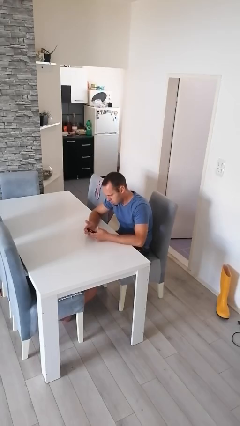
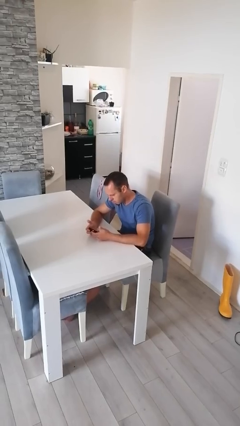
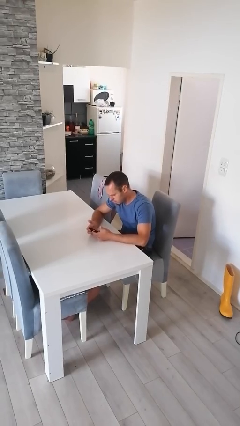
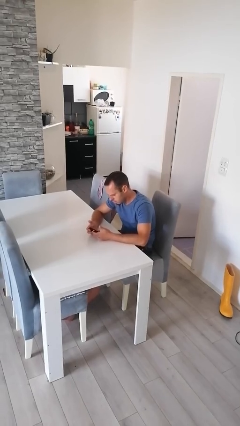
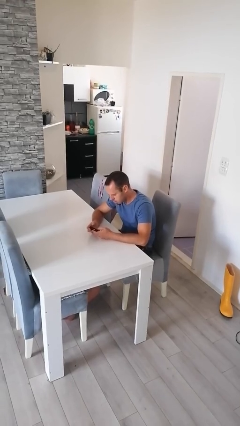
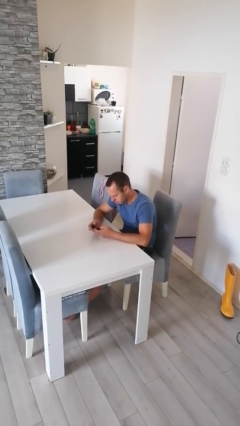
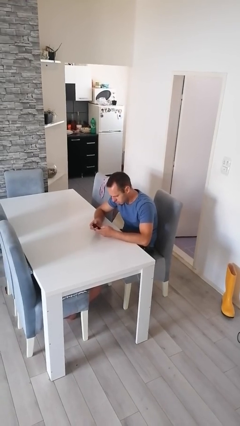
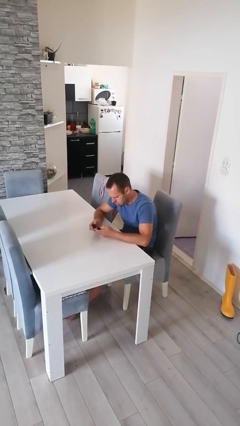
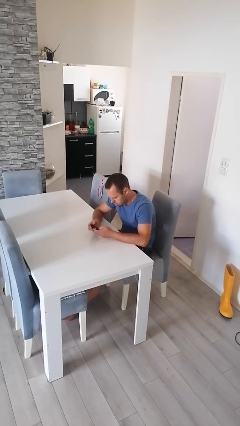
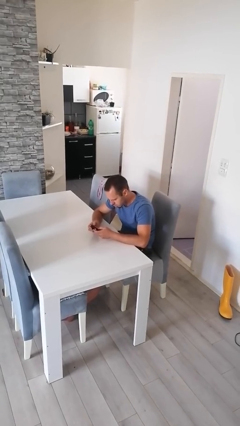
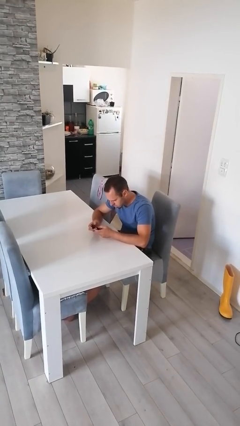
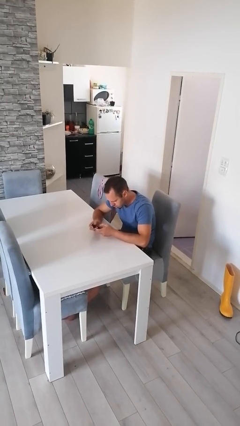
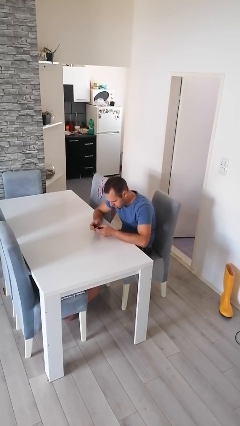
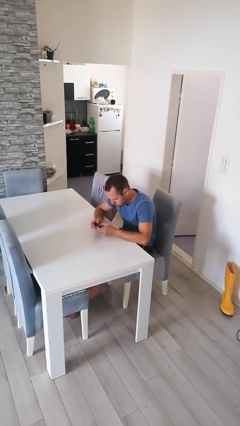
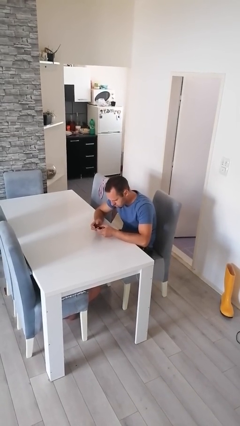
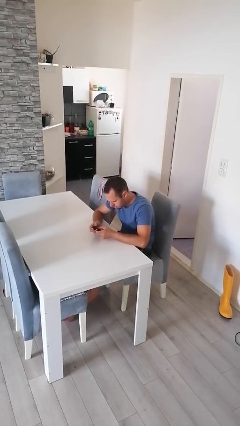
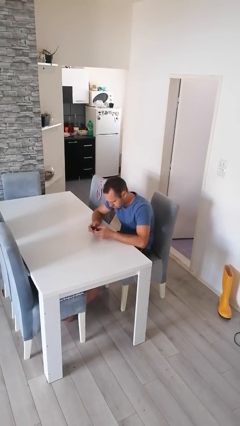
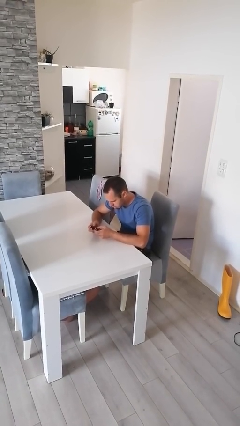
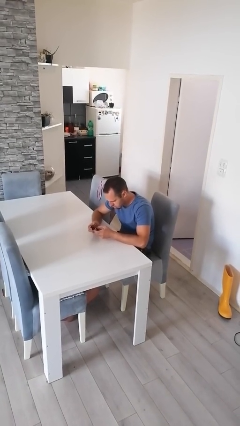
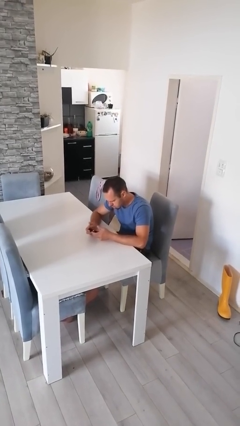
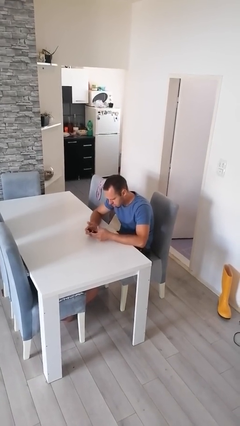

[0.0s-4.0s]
person interacts with handheld game

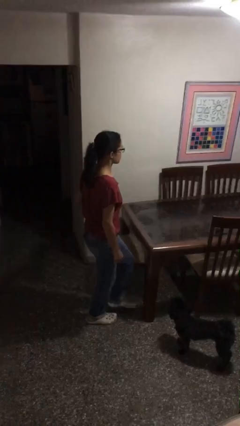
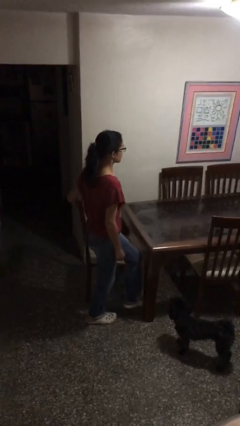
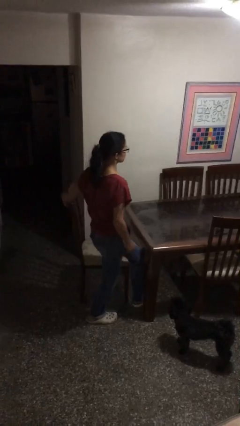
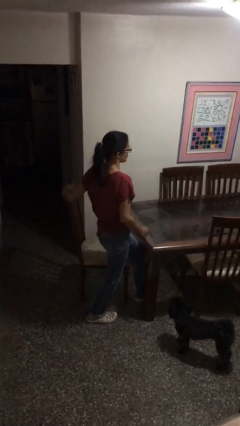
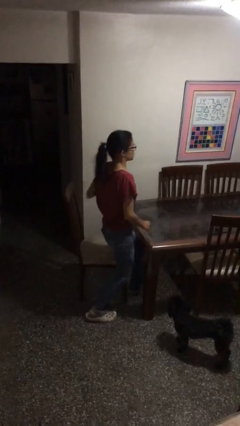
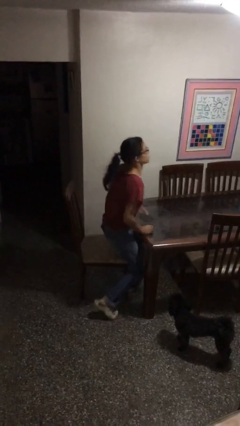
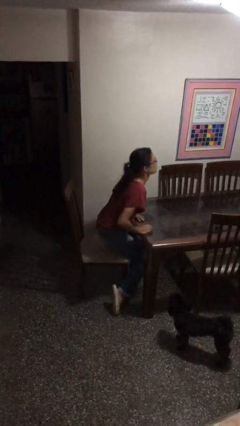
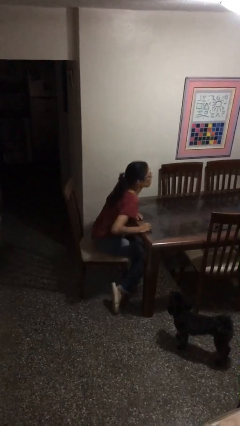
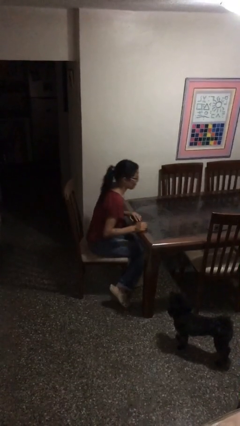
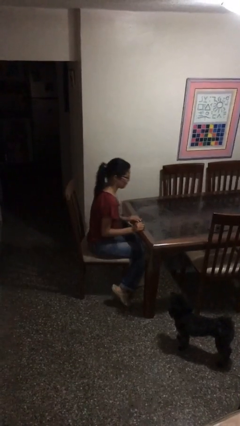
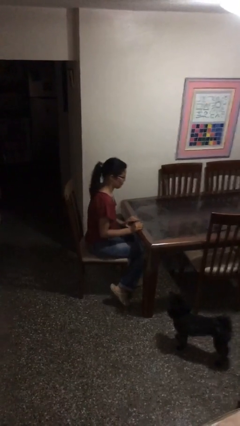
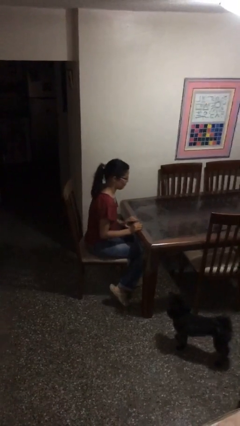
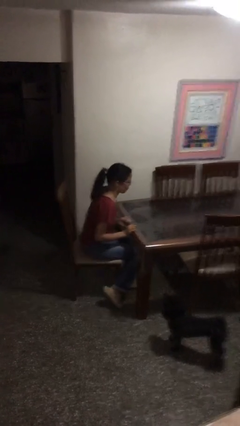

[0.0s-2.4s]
person sits down

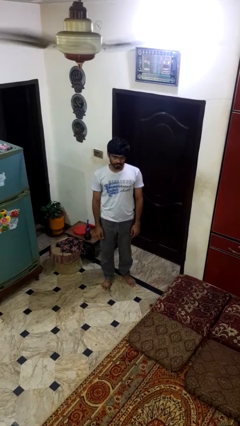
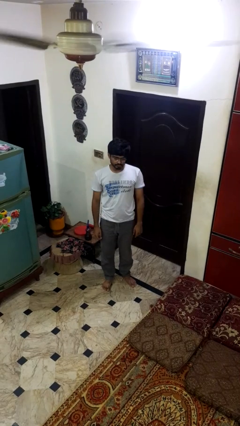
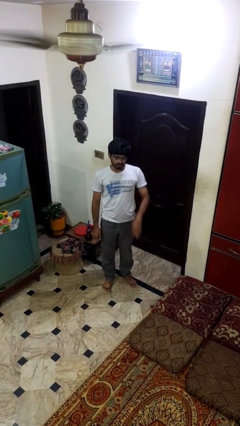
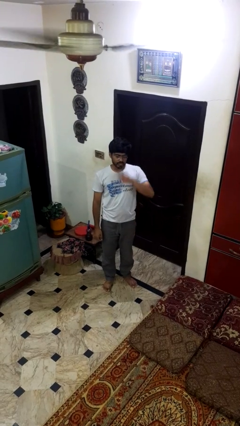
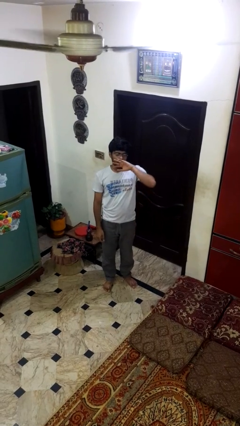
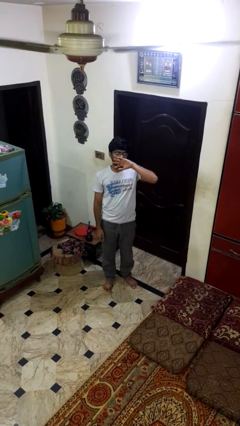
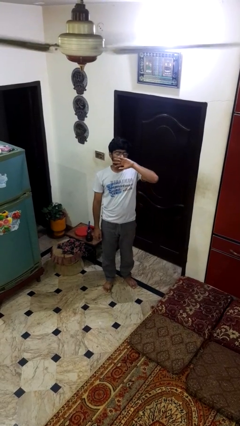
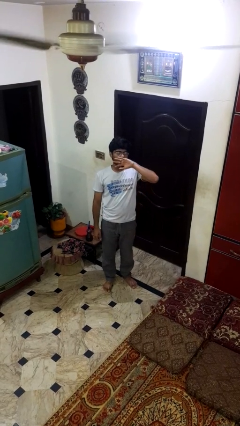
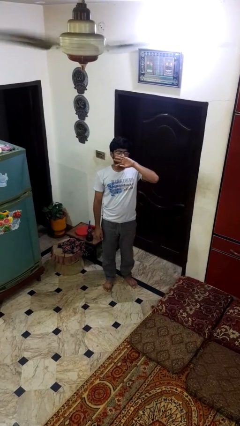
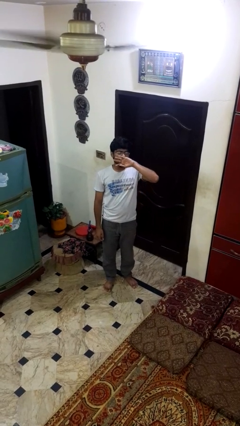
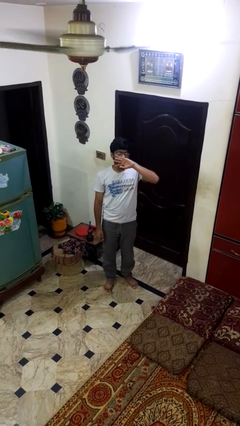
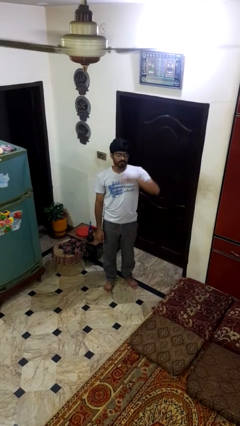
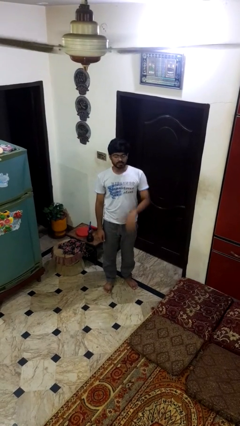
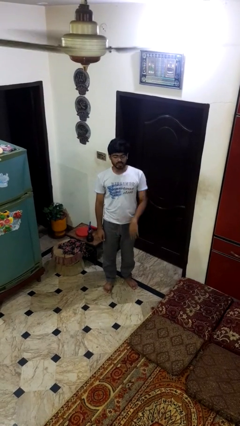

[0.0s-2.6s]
person yawns

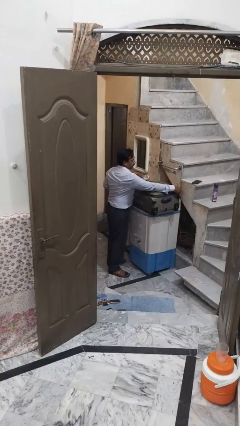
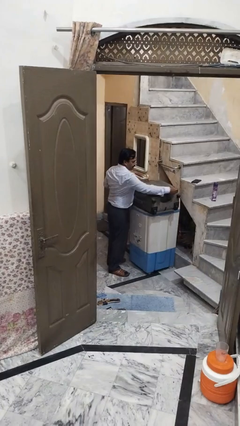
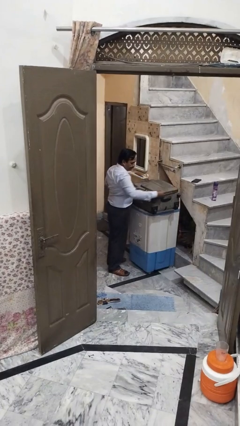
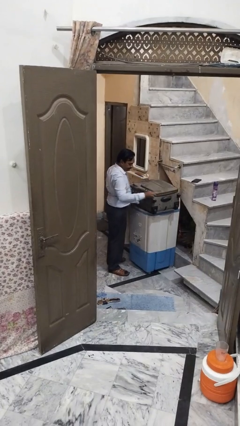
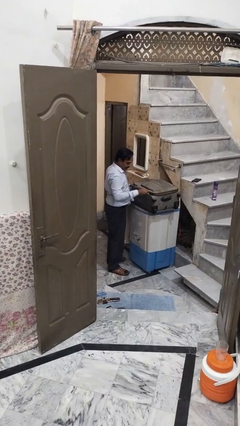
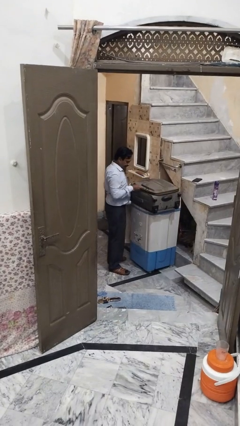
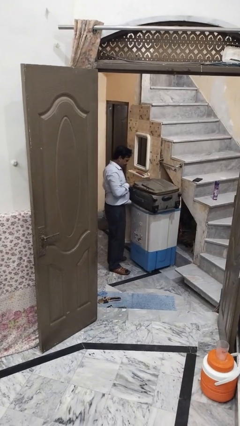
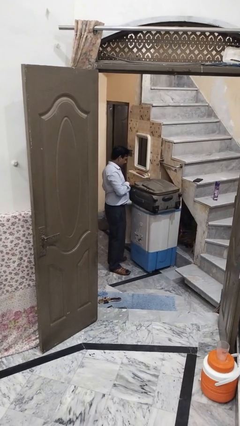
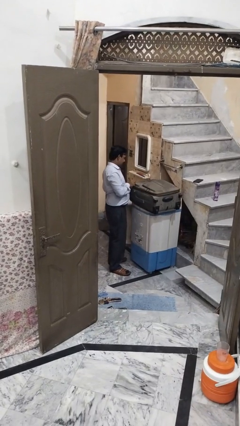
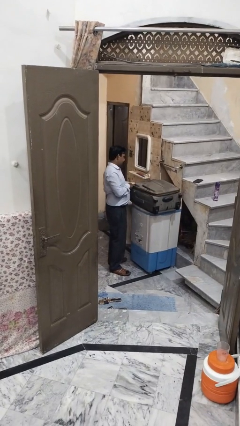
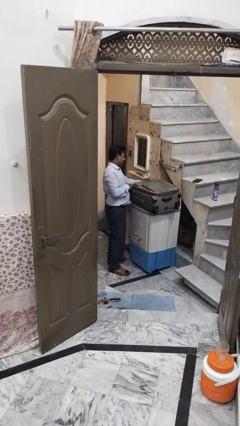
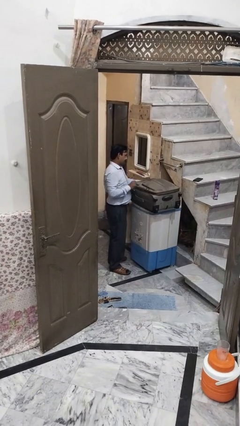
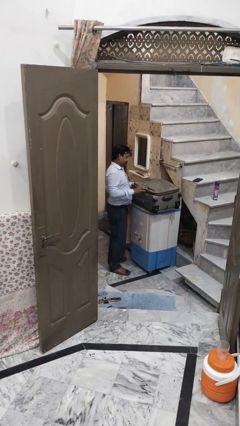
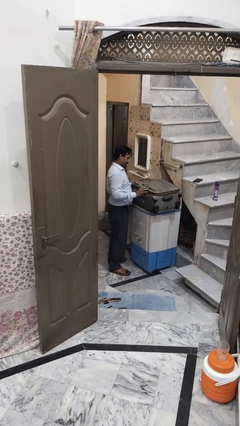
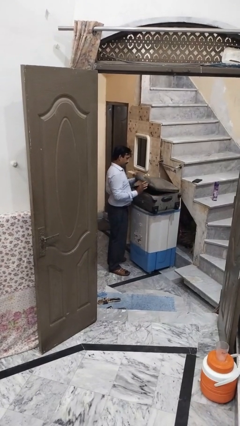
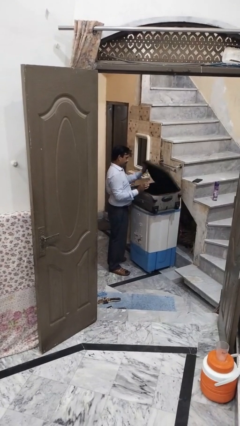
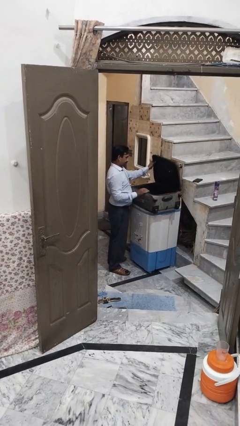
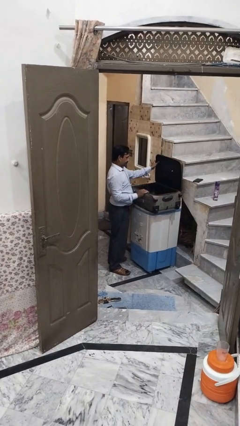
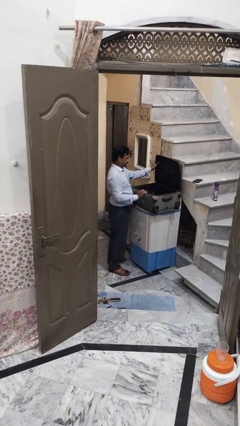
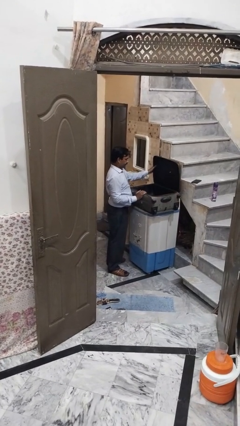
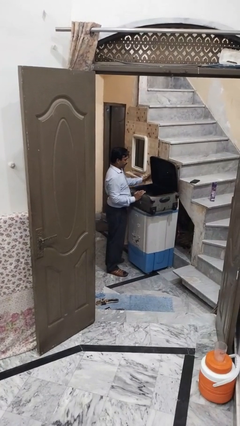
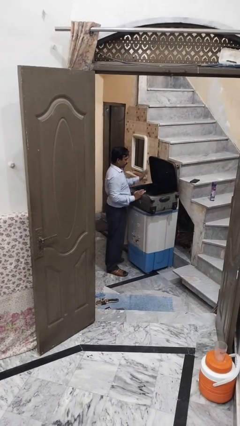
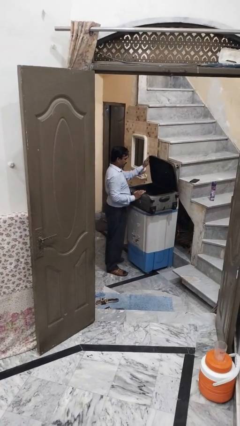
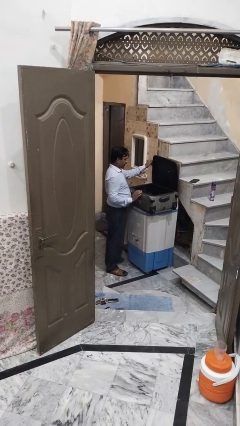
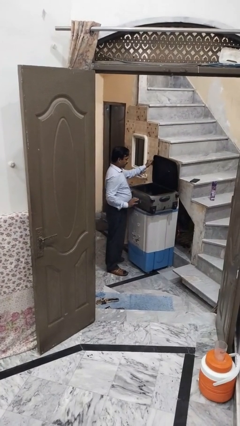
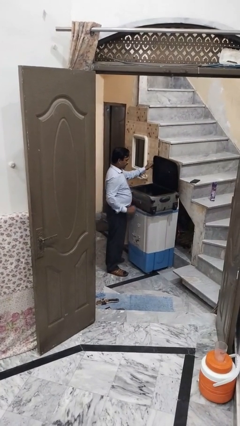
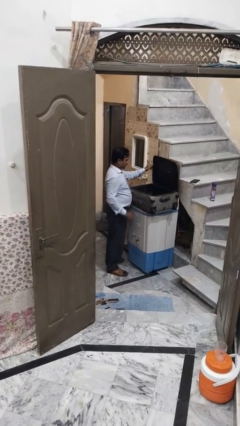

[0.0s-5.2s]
person opens suitcase

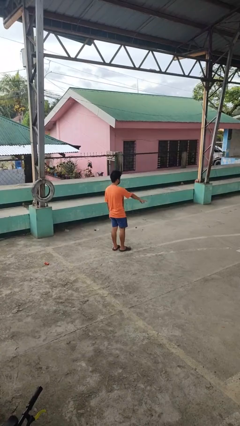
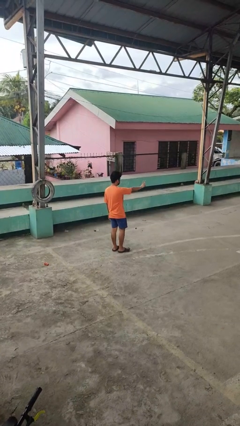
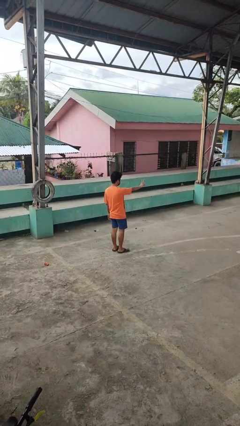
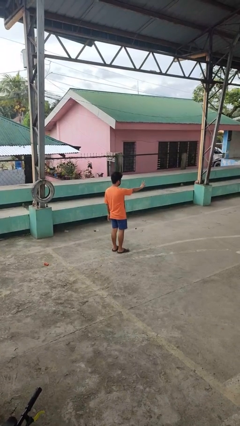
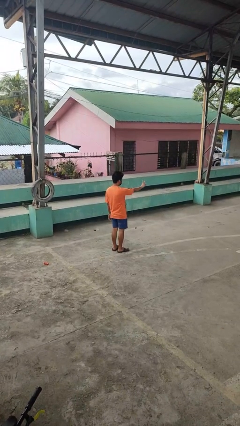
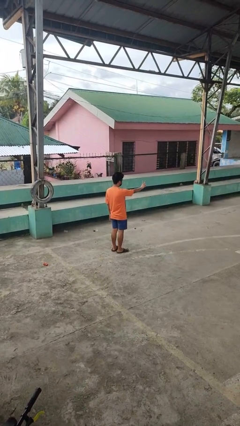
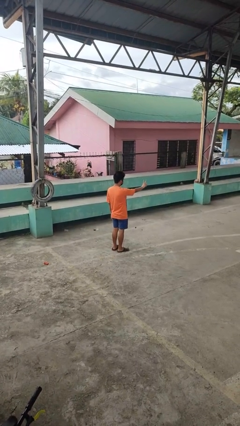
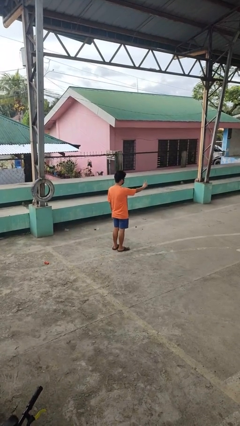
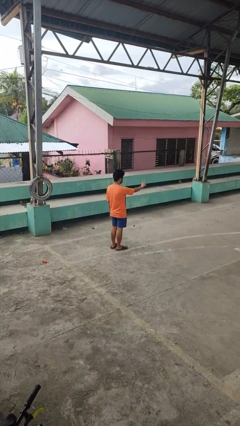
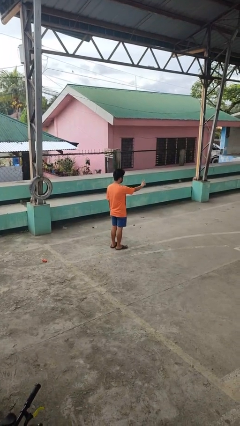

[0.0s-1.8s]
person gestures peace

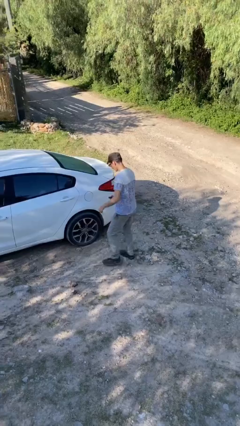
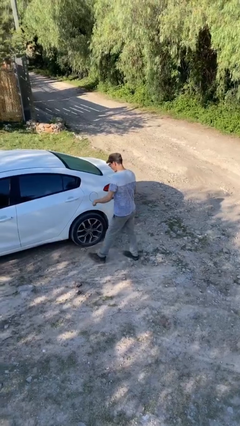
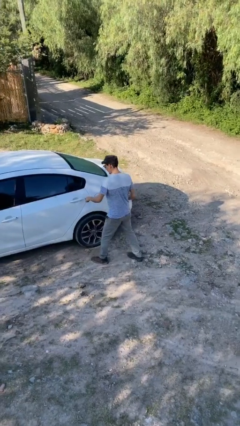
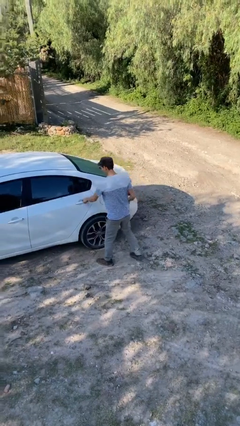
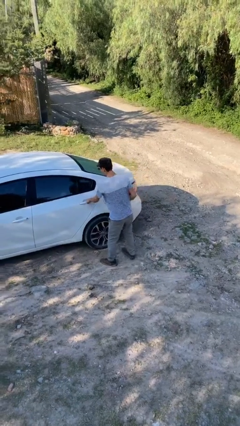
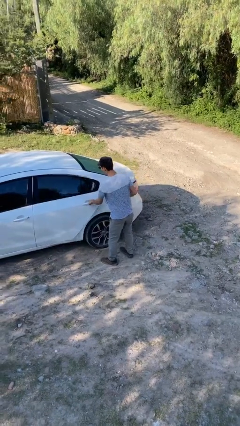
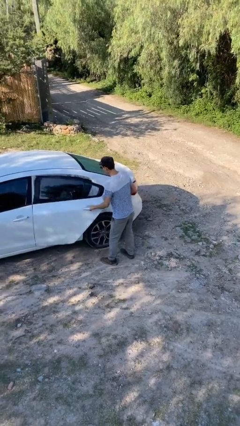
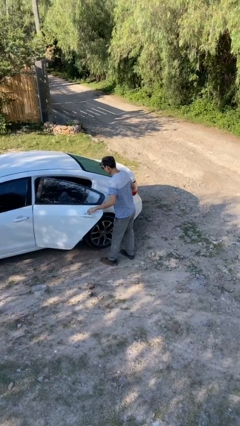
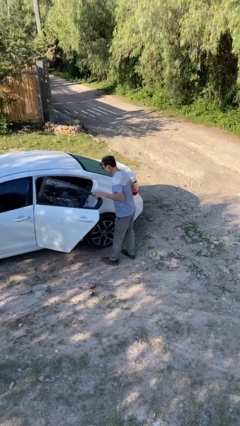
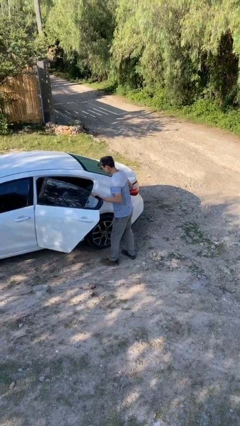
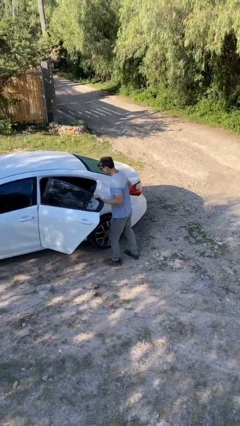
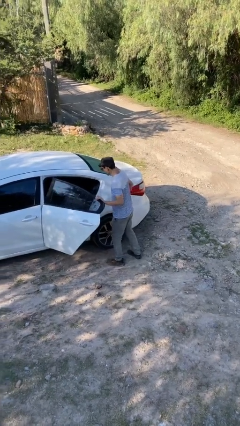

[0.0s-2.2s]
person opens car door
